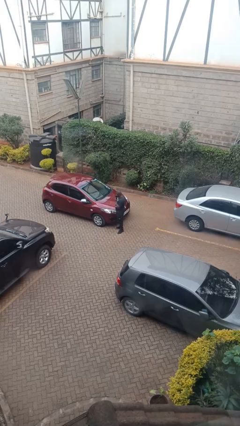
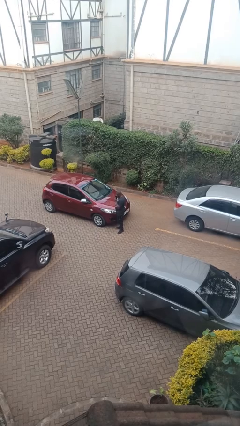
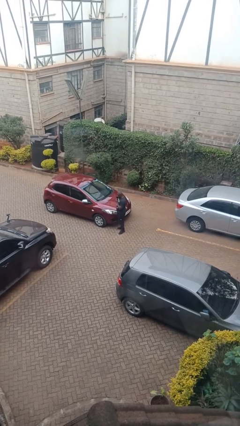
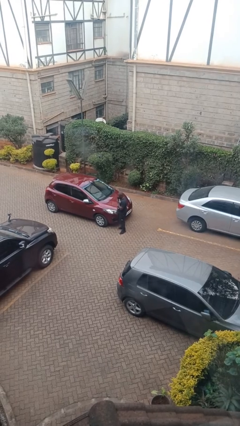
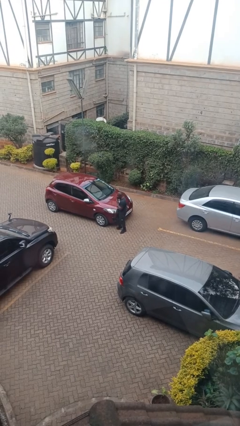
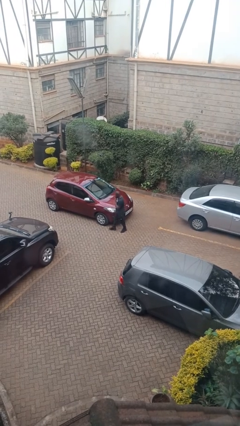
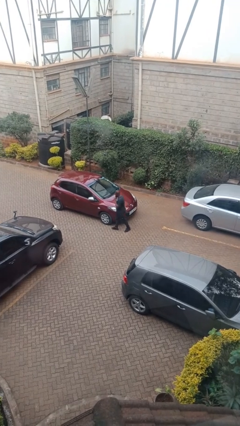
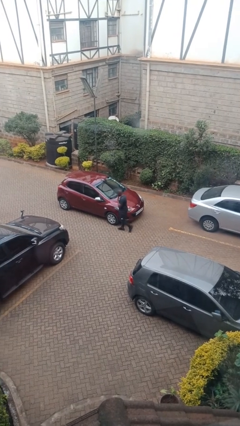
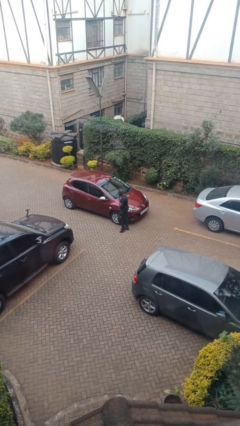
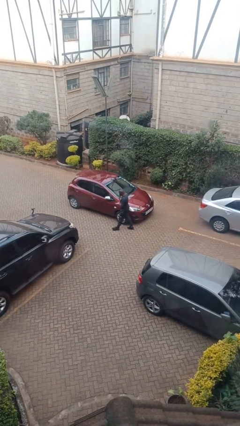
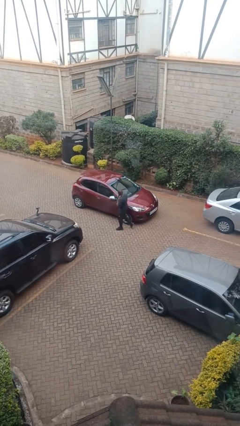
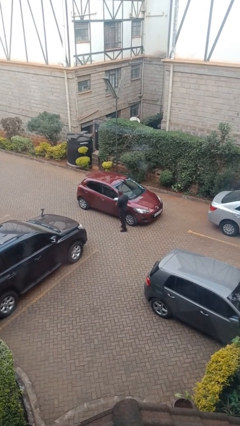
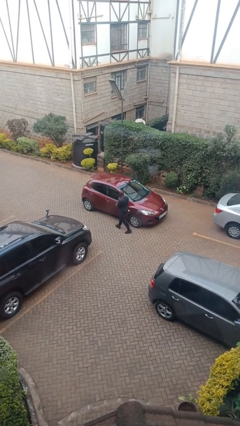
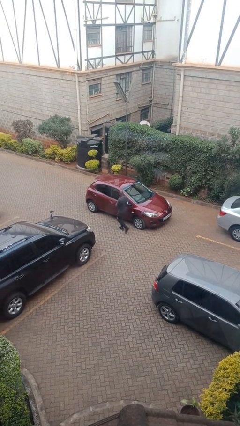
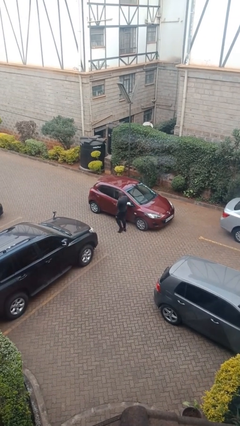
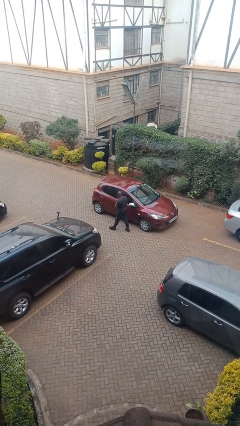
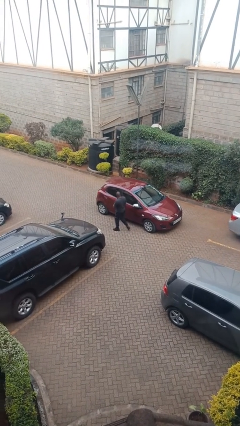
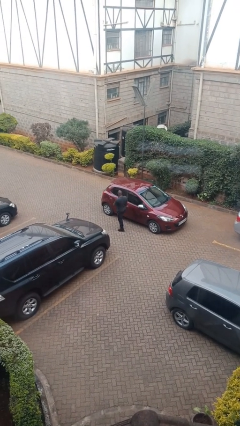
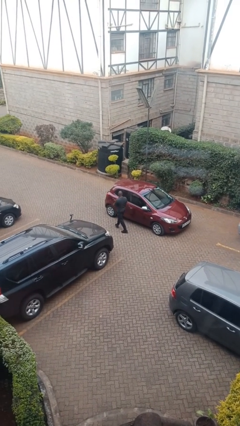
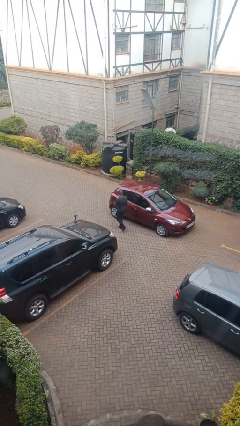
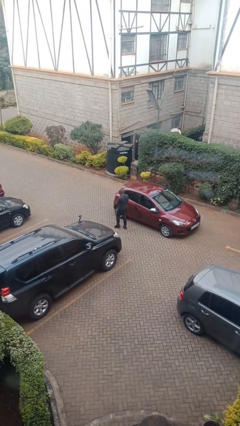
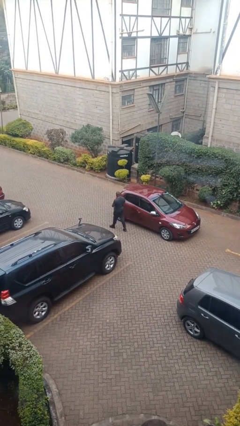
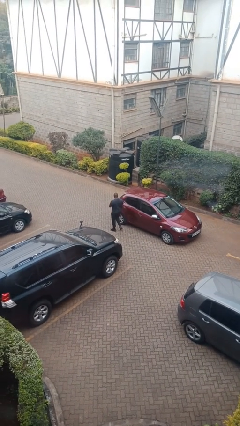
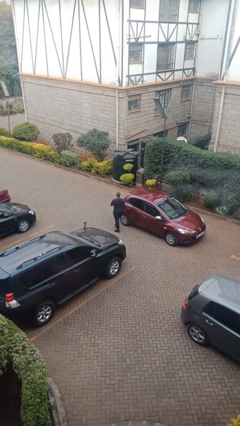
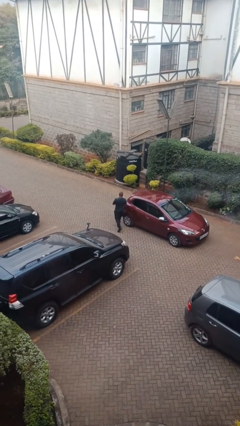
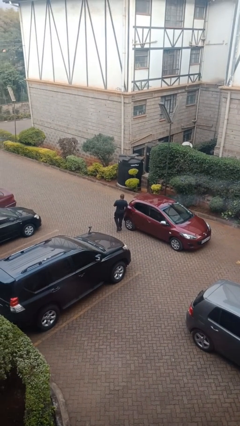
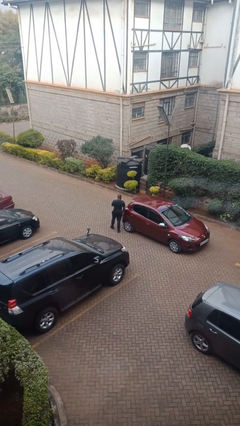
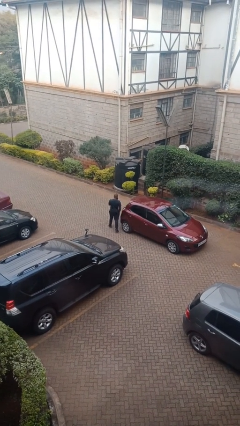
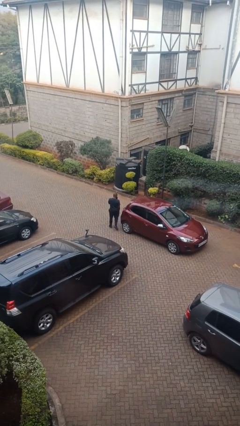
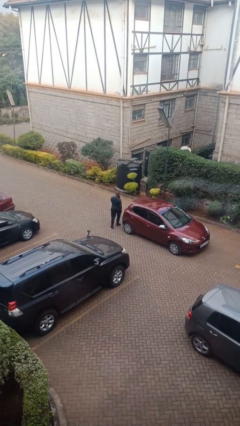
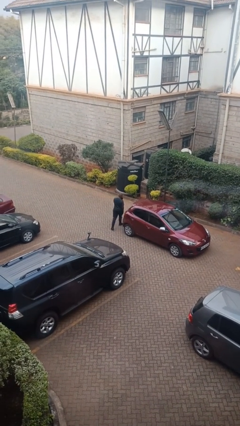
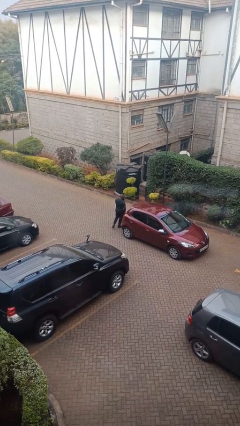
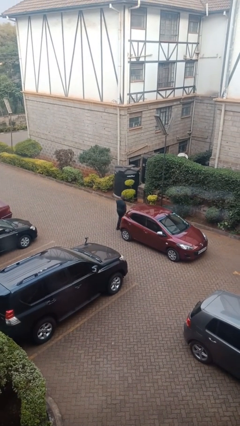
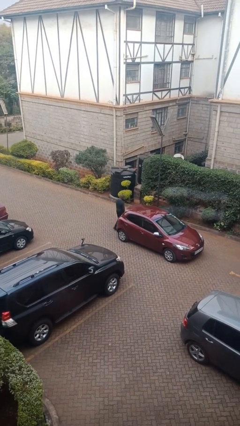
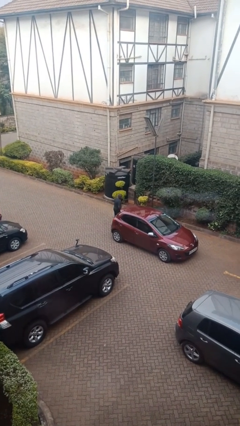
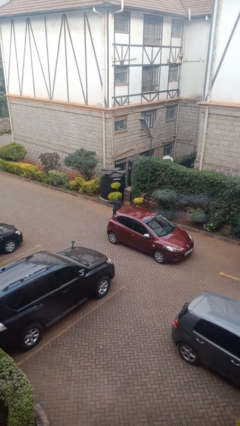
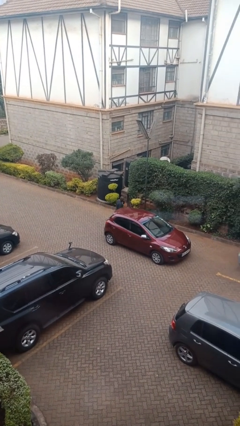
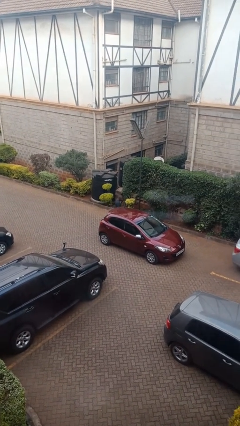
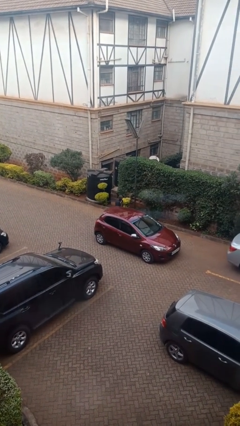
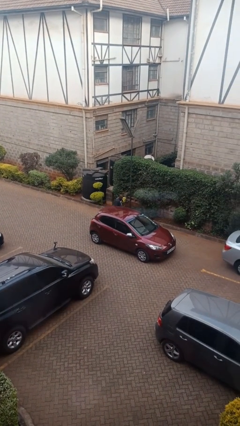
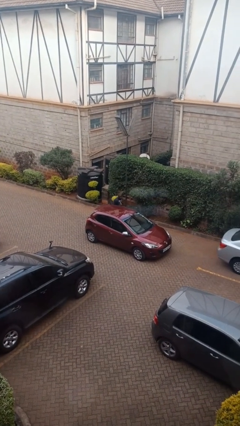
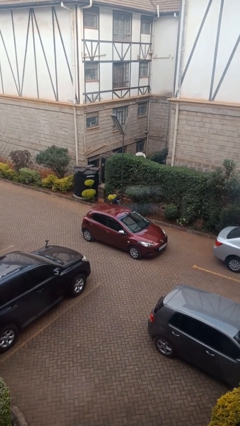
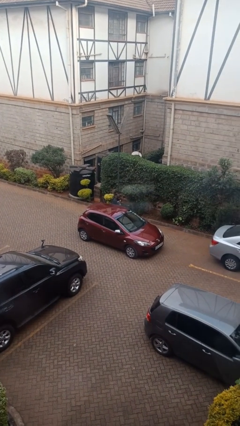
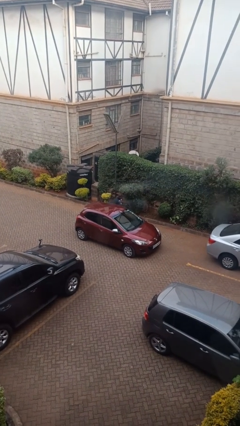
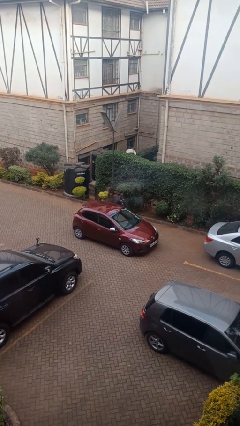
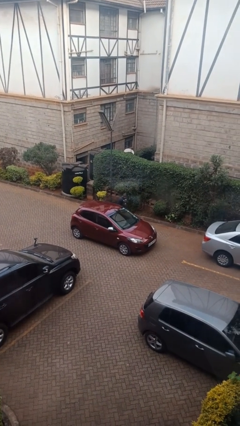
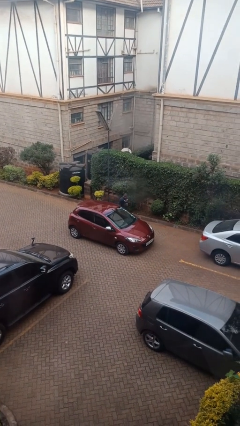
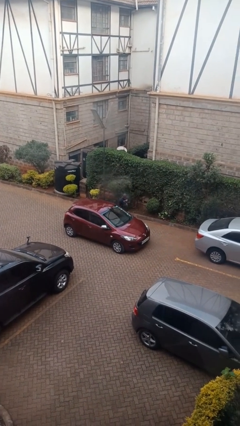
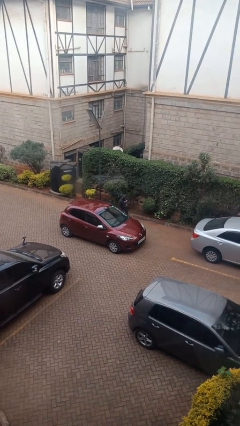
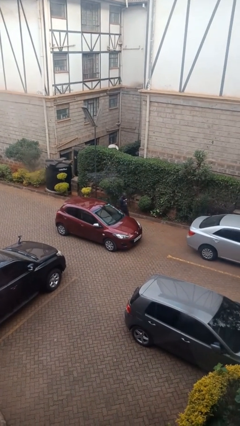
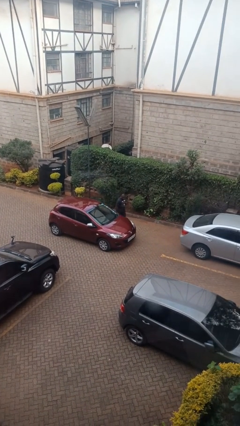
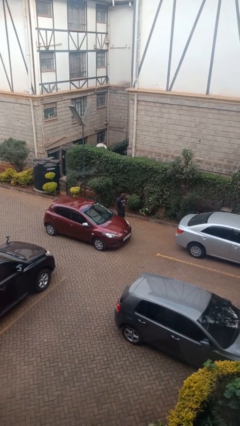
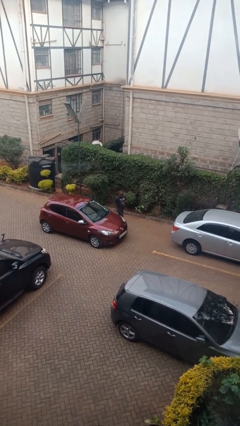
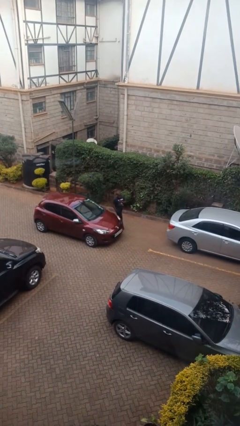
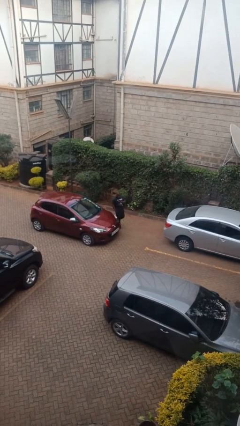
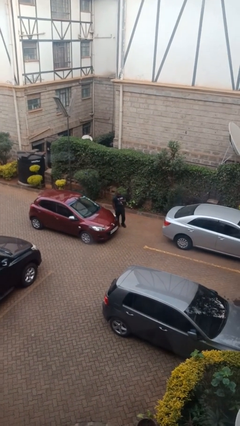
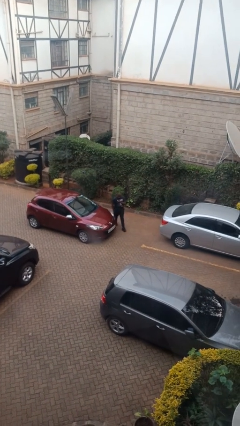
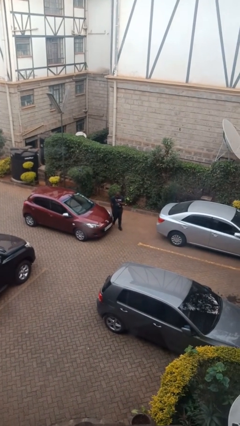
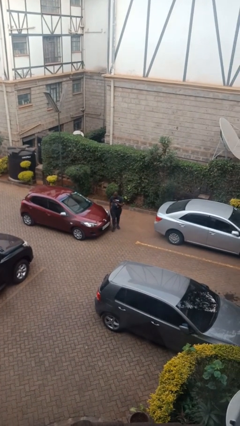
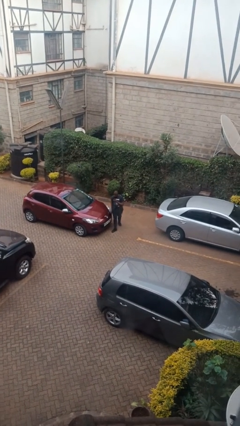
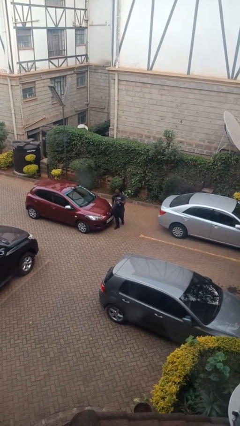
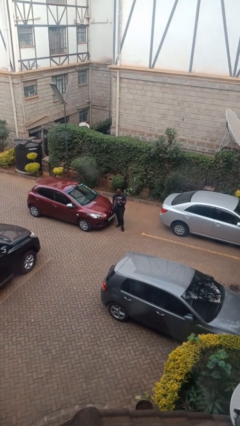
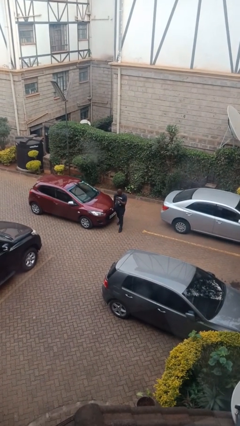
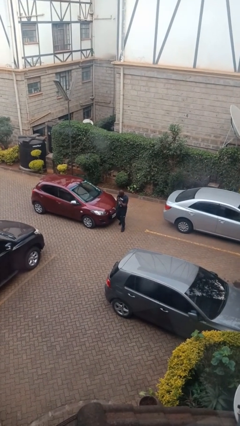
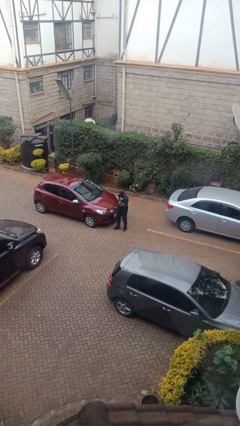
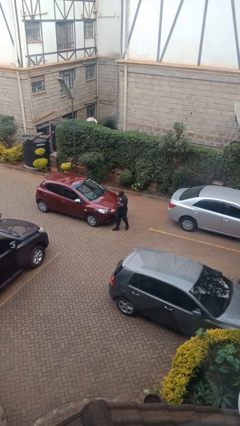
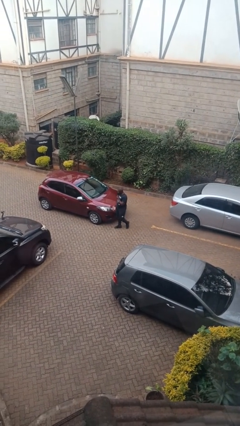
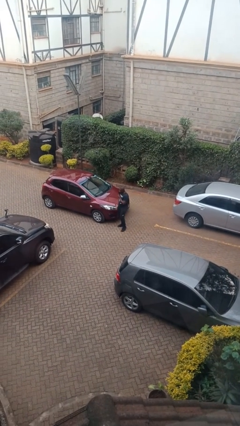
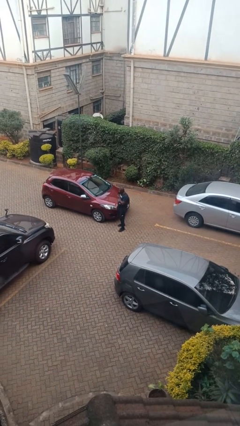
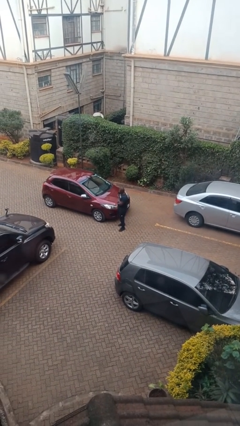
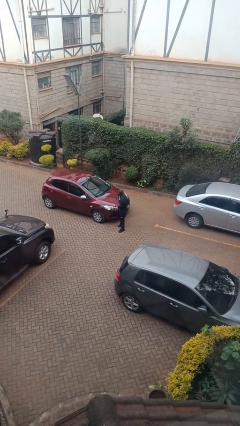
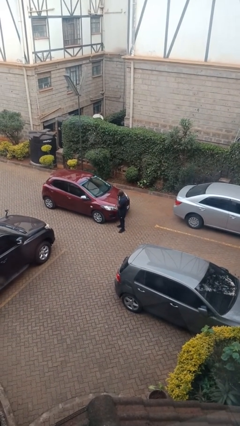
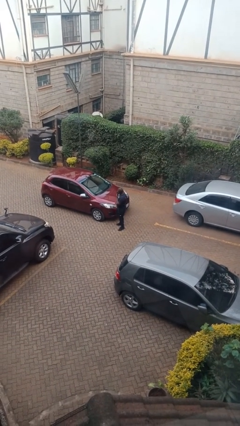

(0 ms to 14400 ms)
person walks around car

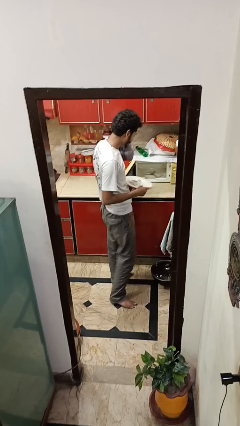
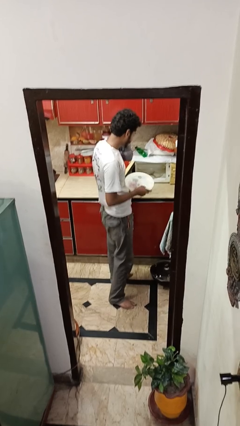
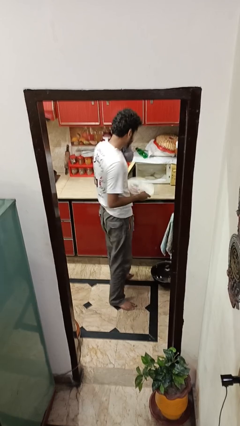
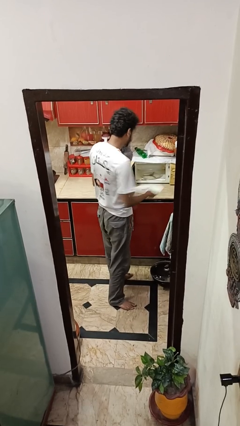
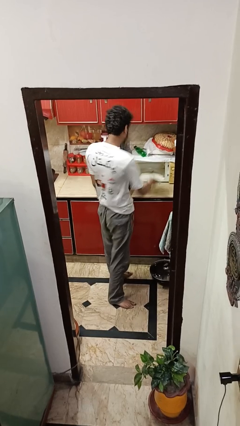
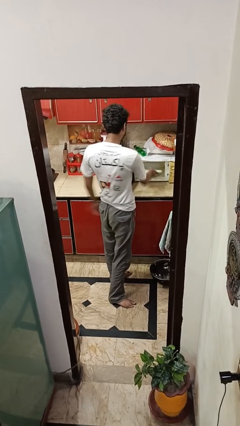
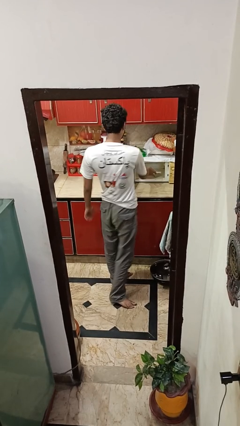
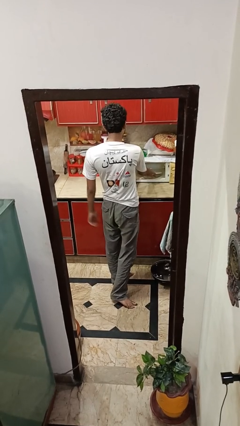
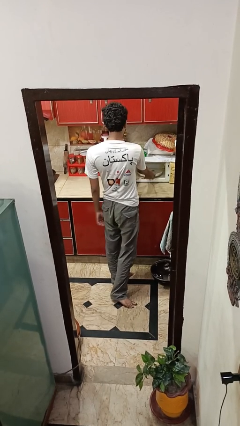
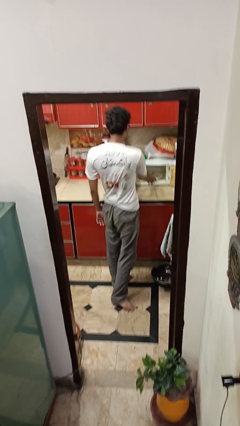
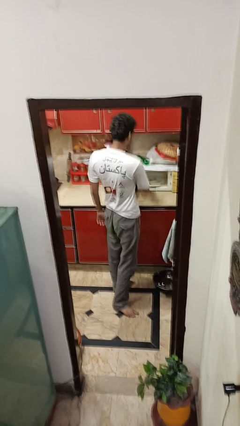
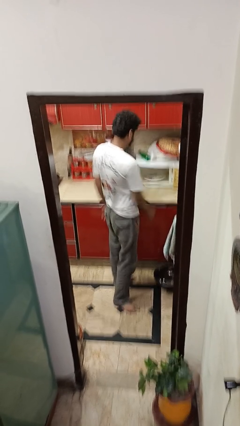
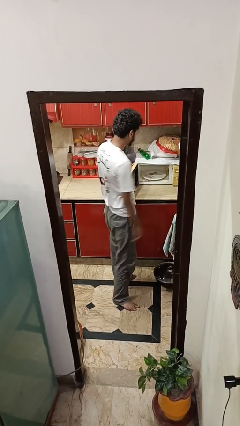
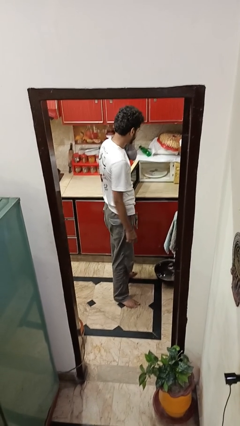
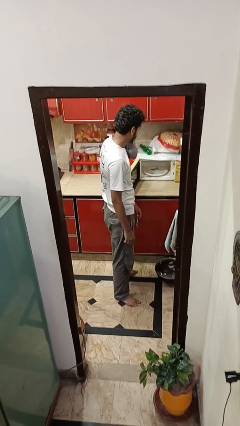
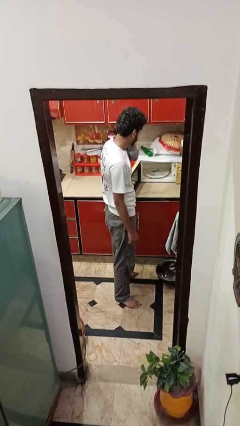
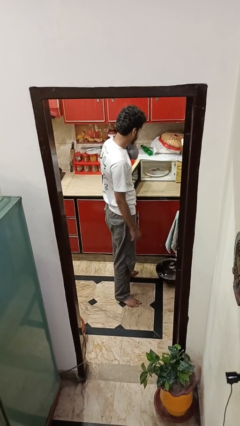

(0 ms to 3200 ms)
person puts object into oven

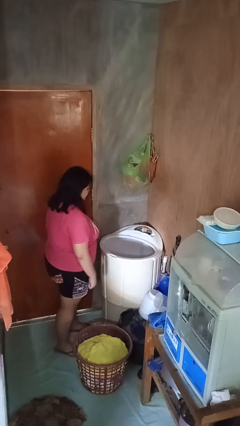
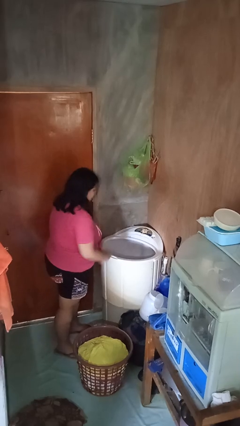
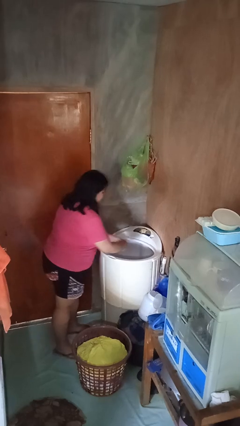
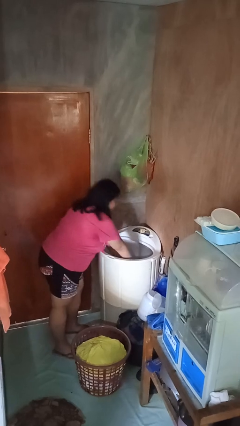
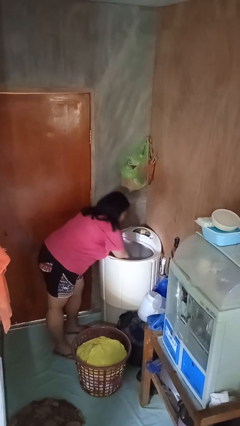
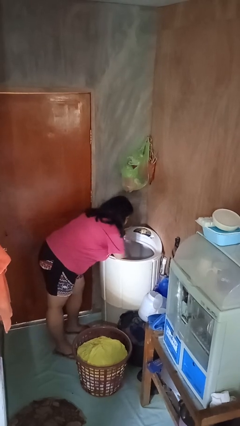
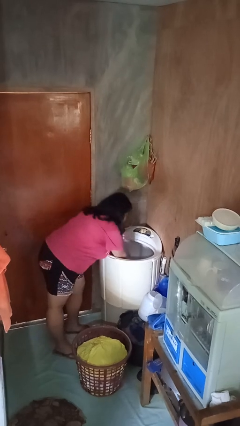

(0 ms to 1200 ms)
person unloads clotheswasher
